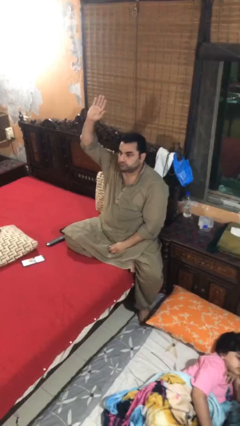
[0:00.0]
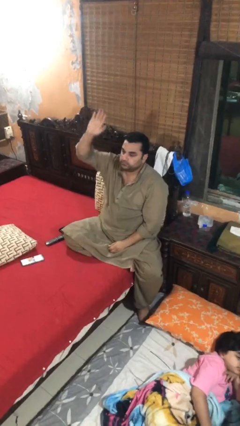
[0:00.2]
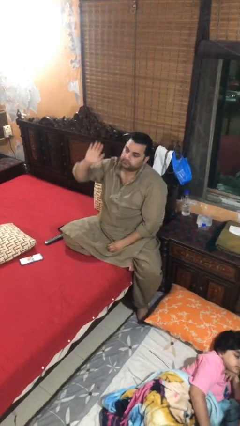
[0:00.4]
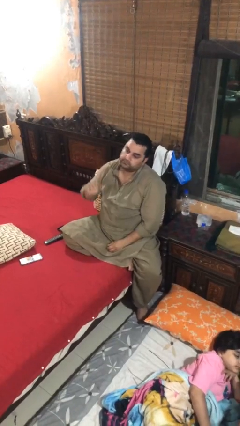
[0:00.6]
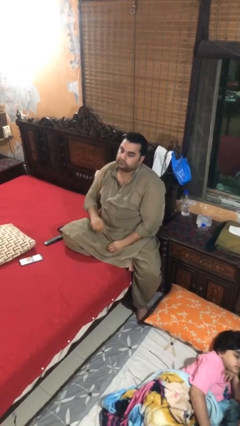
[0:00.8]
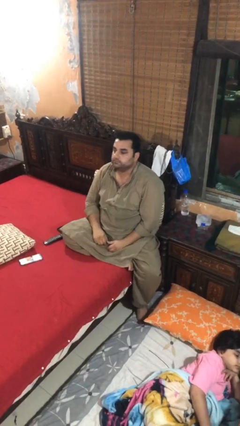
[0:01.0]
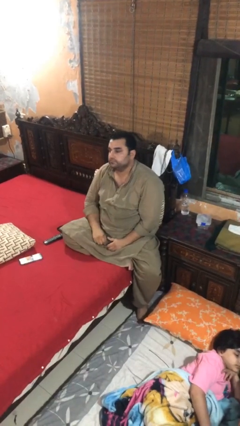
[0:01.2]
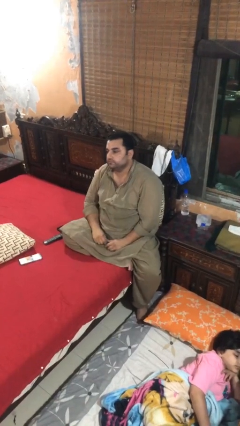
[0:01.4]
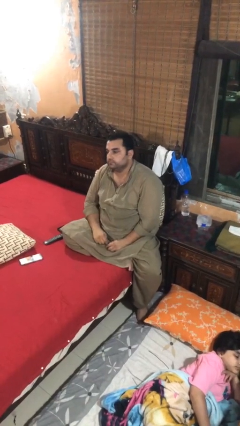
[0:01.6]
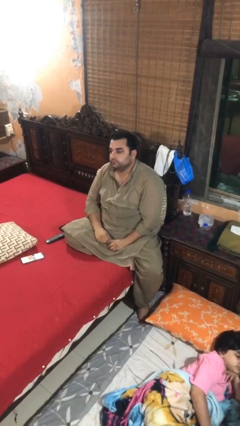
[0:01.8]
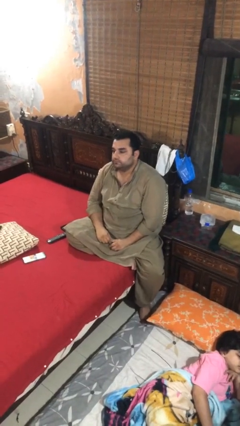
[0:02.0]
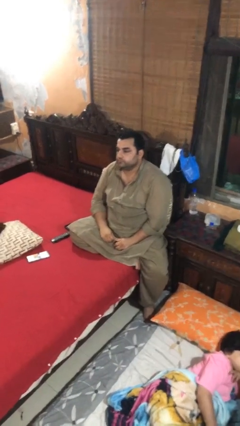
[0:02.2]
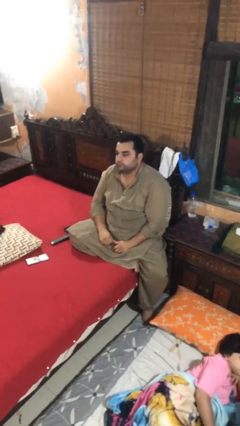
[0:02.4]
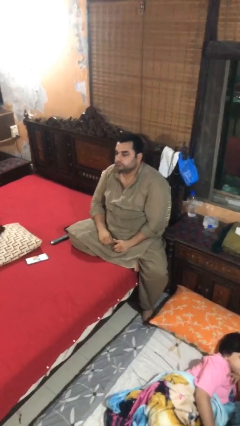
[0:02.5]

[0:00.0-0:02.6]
person gestures lower hand

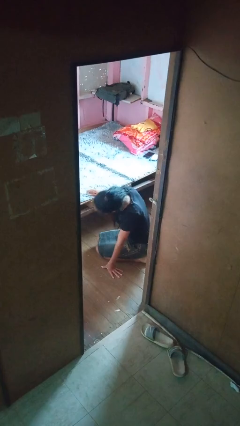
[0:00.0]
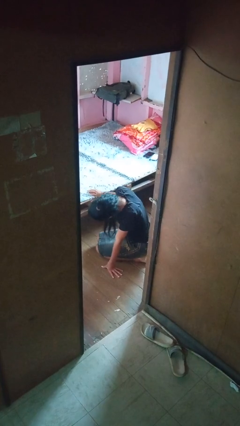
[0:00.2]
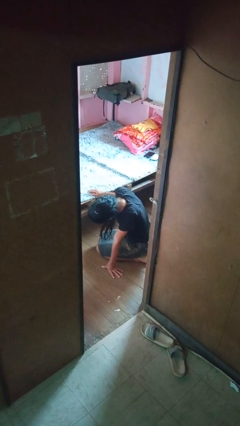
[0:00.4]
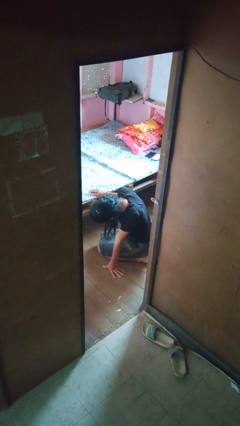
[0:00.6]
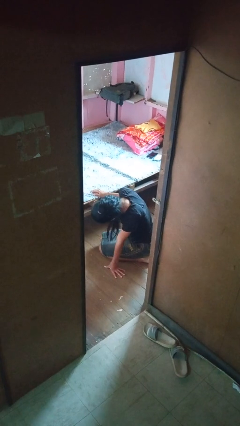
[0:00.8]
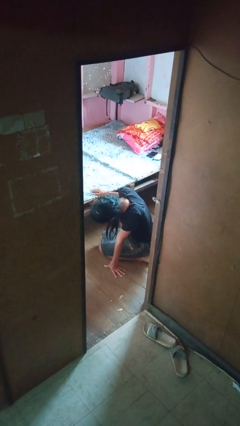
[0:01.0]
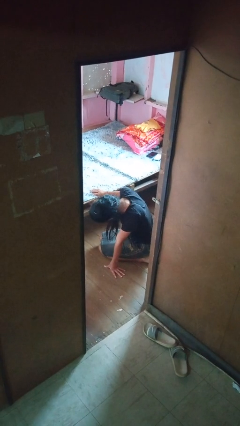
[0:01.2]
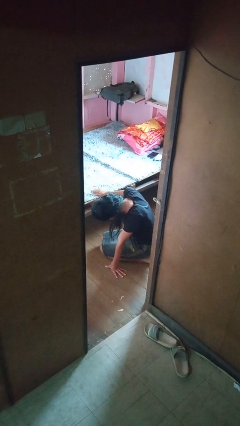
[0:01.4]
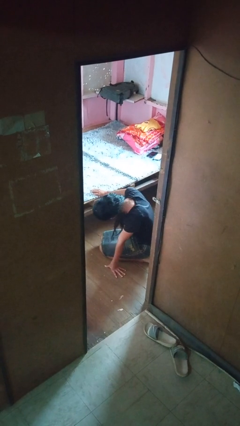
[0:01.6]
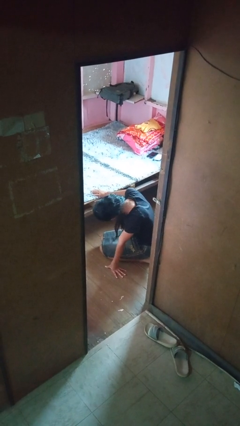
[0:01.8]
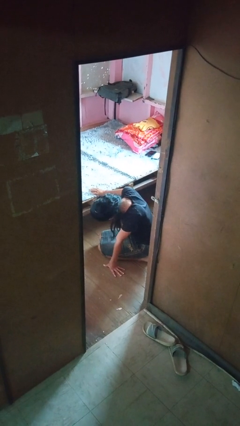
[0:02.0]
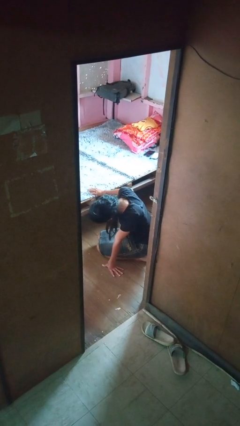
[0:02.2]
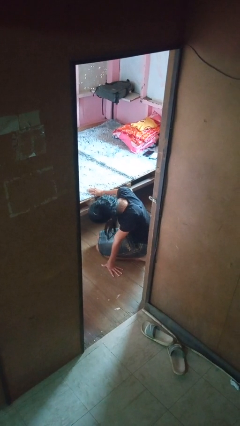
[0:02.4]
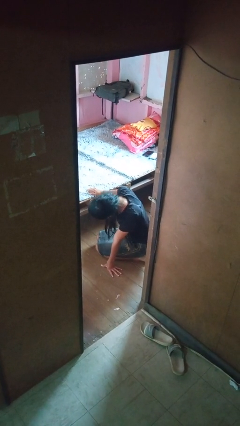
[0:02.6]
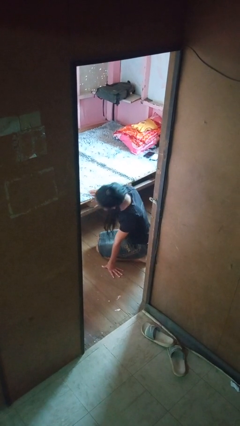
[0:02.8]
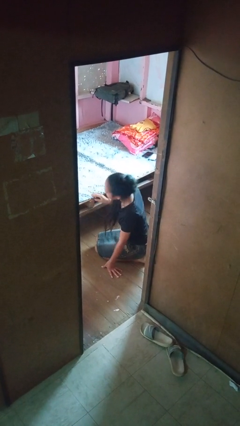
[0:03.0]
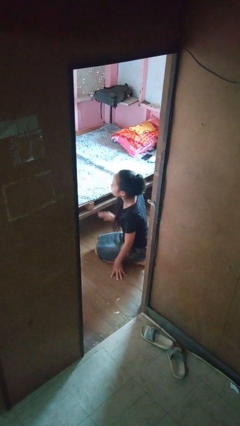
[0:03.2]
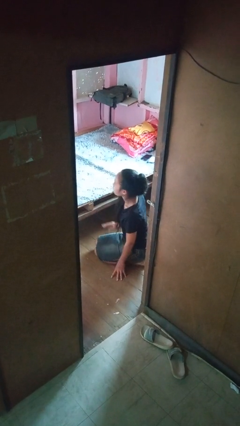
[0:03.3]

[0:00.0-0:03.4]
person searches under bed

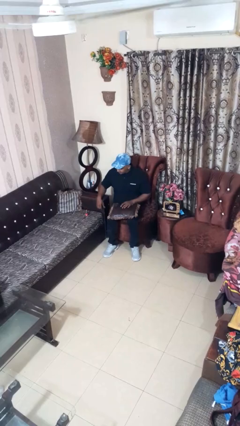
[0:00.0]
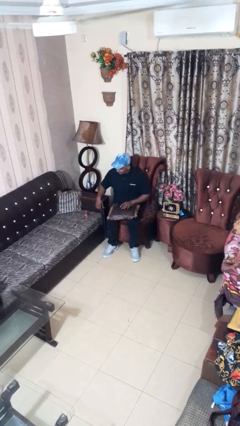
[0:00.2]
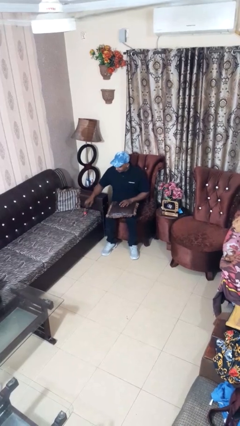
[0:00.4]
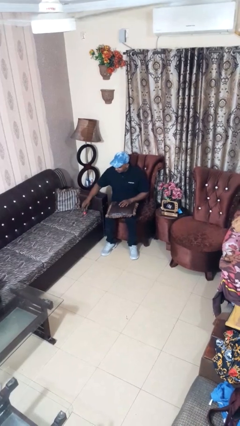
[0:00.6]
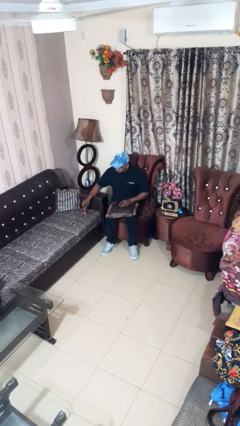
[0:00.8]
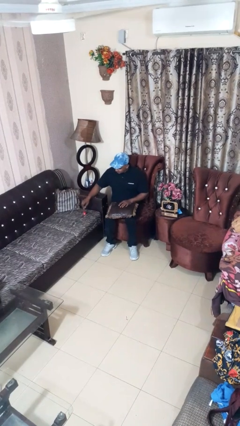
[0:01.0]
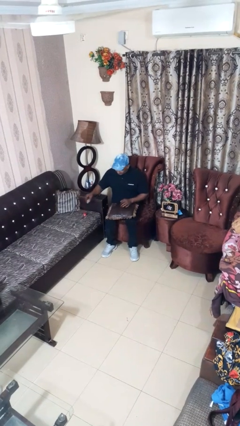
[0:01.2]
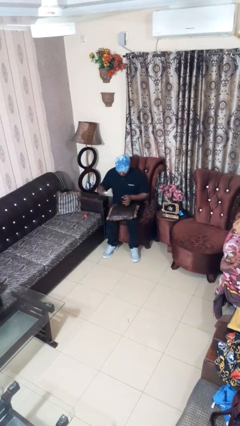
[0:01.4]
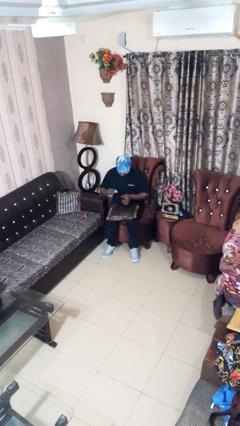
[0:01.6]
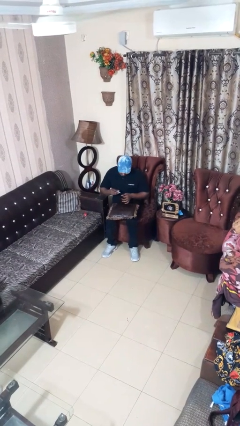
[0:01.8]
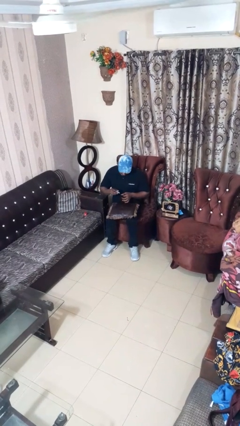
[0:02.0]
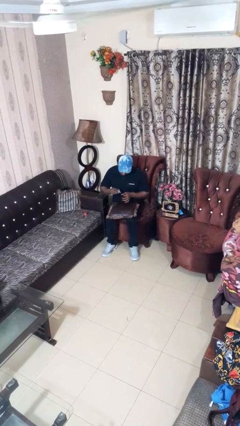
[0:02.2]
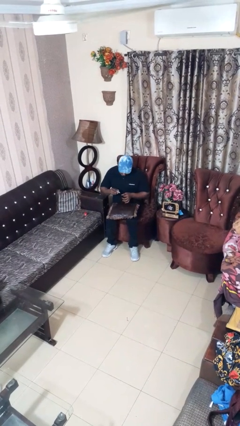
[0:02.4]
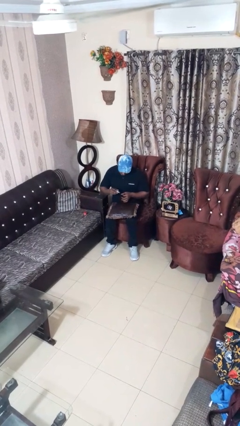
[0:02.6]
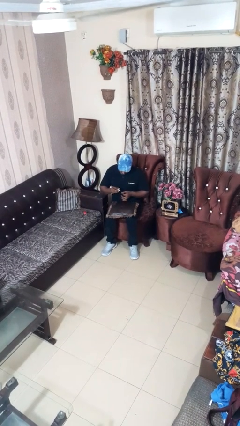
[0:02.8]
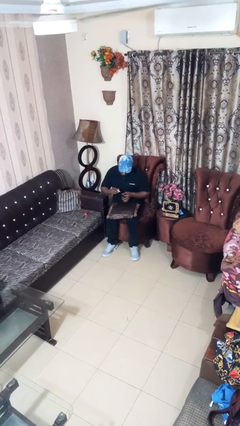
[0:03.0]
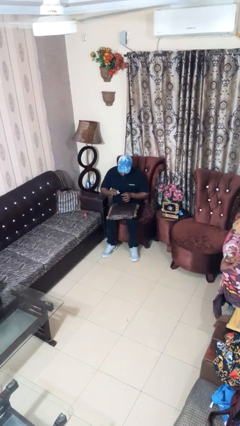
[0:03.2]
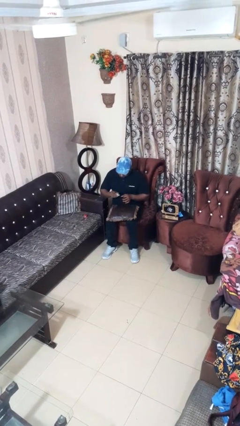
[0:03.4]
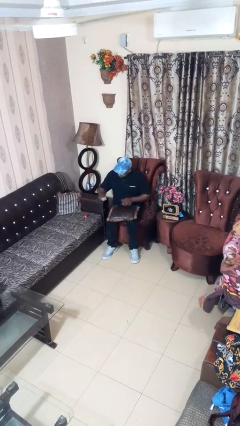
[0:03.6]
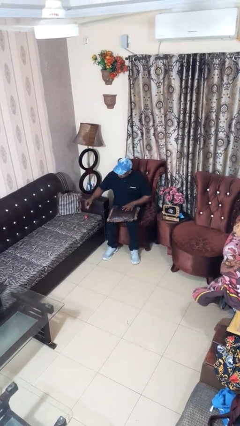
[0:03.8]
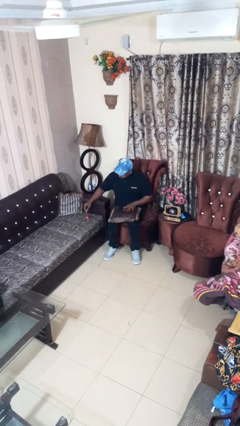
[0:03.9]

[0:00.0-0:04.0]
person paints fingernails

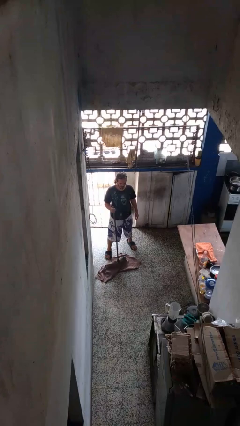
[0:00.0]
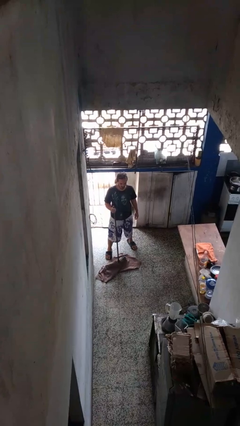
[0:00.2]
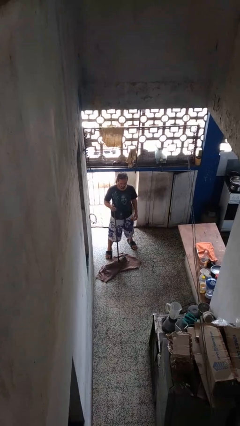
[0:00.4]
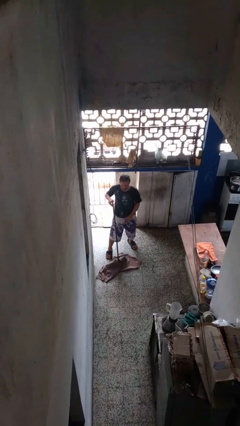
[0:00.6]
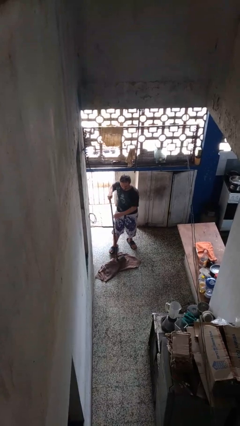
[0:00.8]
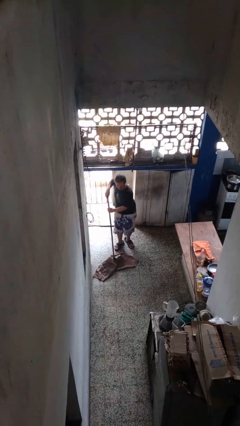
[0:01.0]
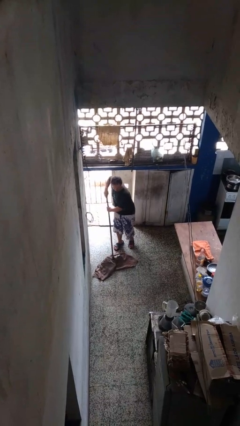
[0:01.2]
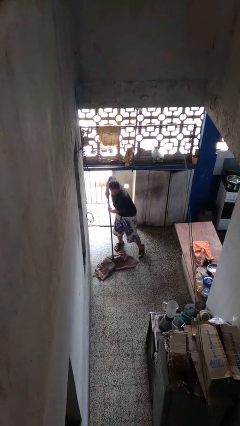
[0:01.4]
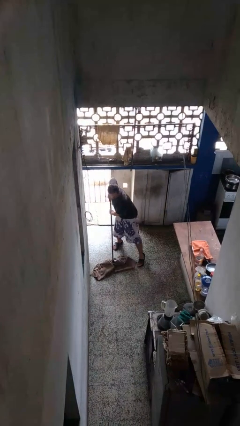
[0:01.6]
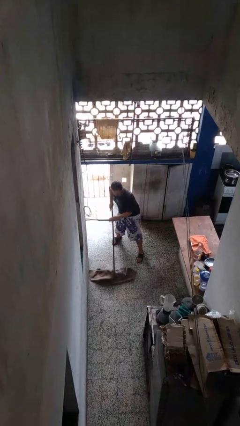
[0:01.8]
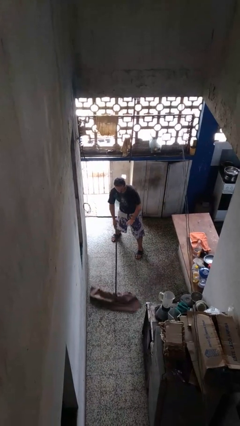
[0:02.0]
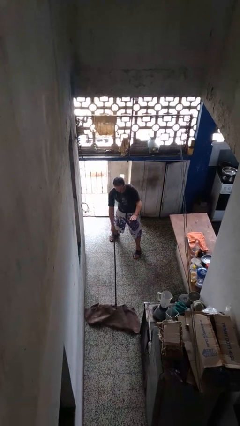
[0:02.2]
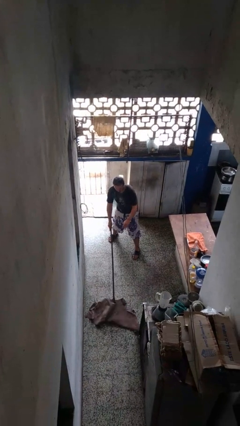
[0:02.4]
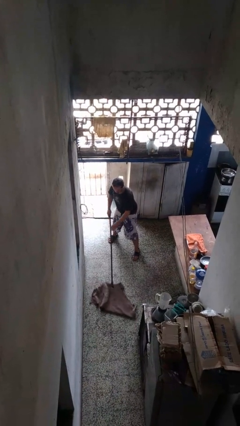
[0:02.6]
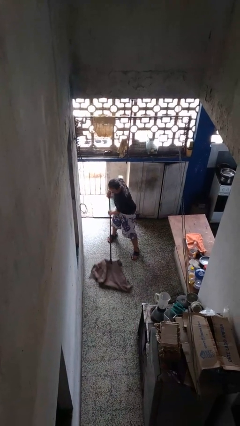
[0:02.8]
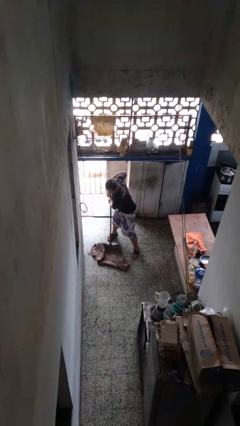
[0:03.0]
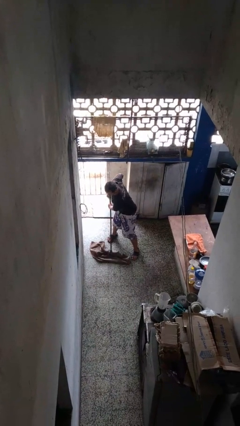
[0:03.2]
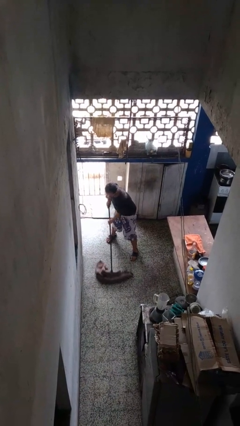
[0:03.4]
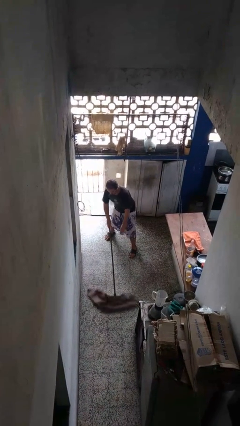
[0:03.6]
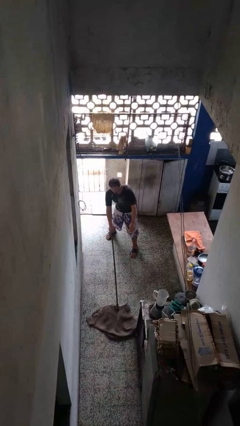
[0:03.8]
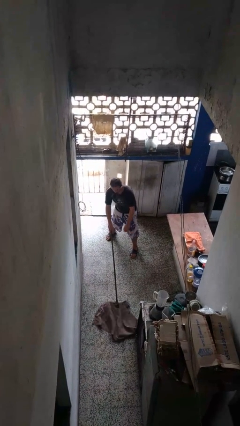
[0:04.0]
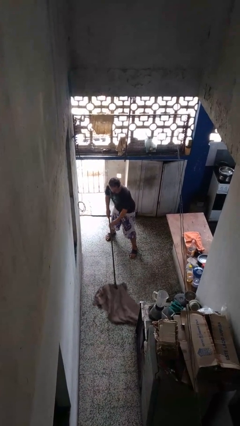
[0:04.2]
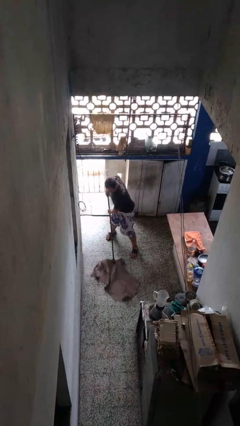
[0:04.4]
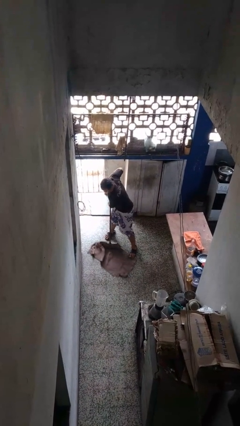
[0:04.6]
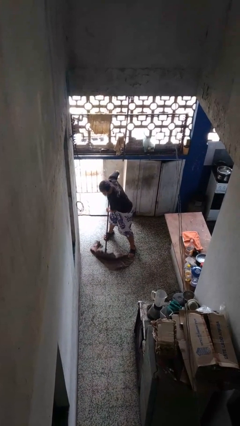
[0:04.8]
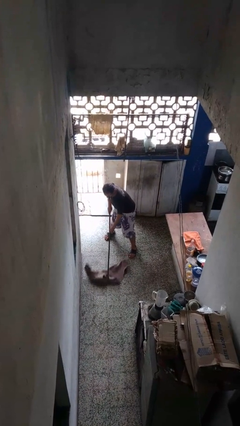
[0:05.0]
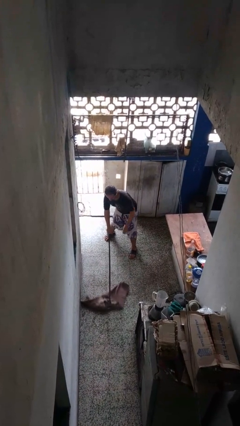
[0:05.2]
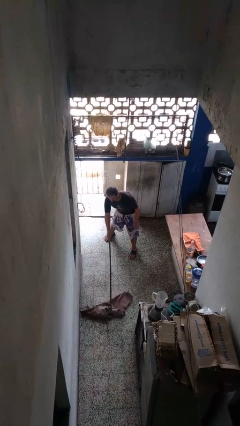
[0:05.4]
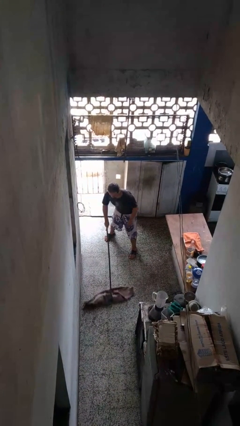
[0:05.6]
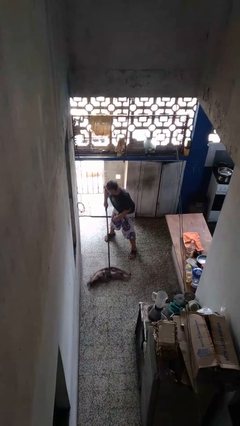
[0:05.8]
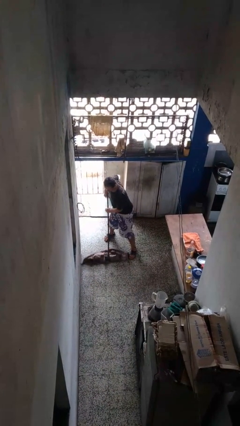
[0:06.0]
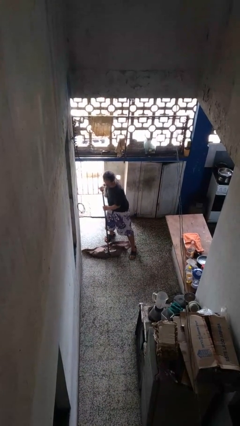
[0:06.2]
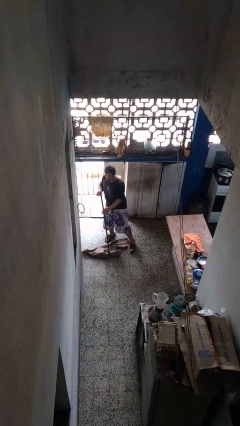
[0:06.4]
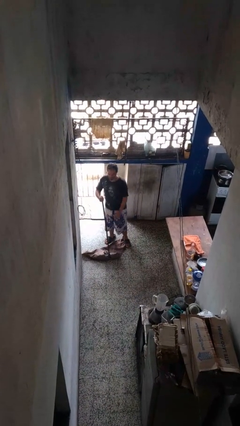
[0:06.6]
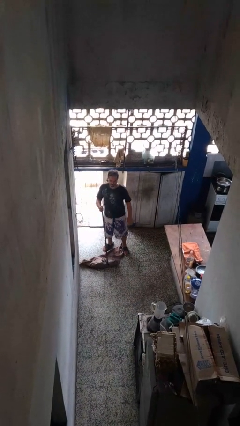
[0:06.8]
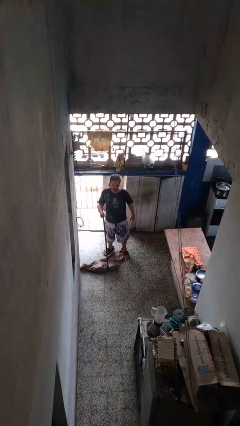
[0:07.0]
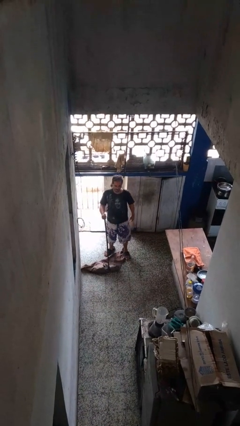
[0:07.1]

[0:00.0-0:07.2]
person mops
